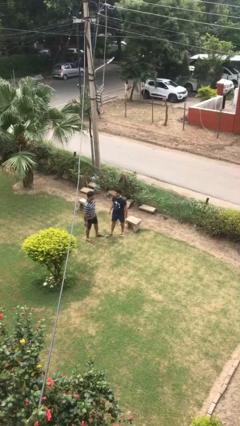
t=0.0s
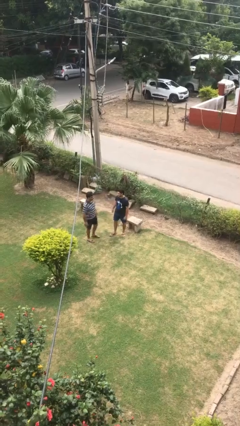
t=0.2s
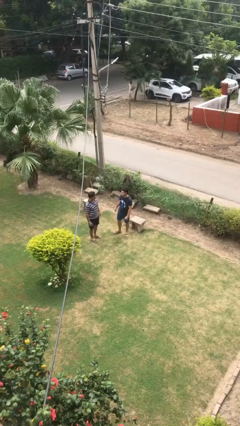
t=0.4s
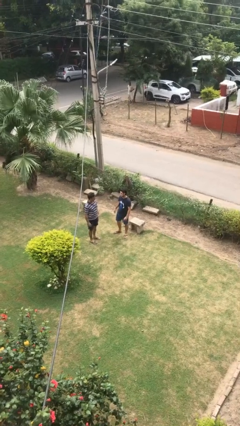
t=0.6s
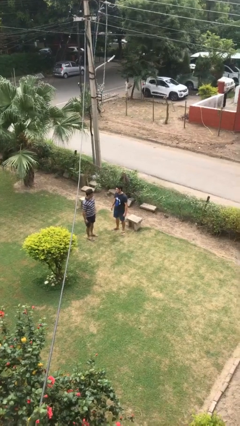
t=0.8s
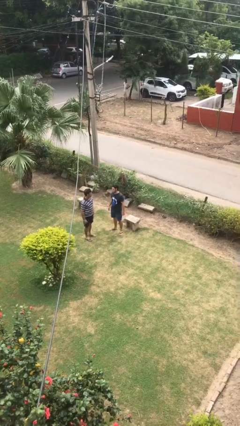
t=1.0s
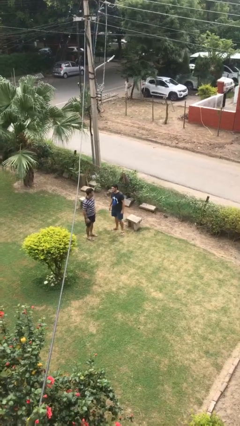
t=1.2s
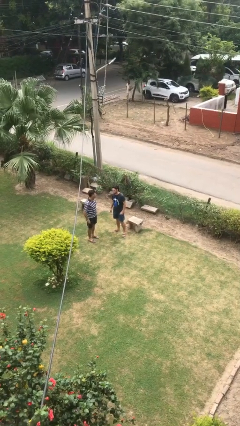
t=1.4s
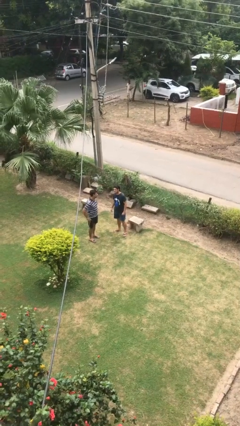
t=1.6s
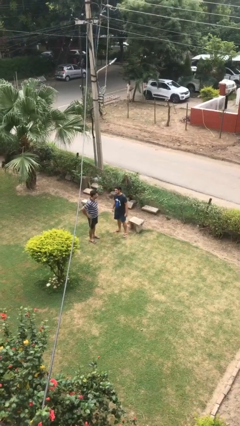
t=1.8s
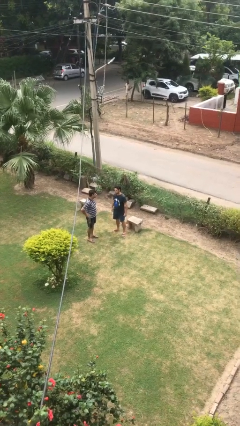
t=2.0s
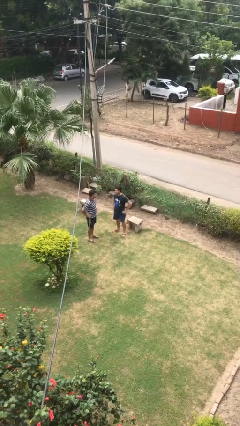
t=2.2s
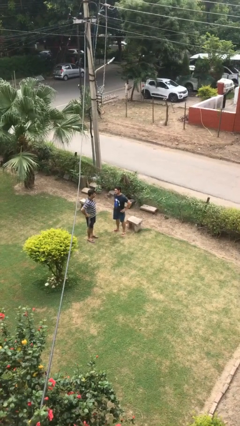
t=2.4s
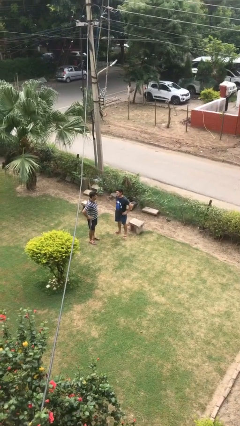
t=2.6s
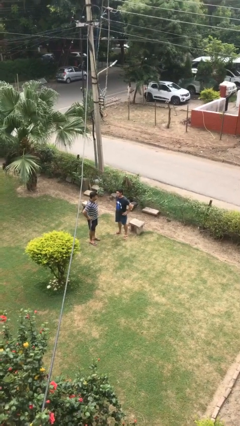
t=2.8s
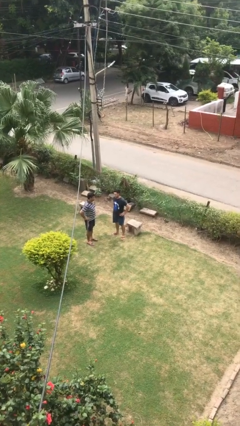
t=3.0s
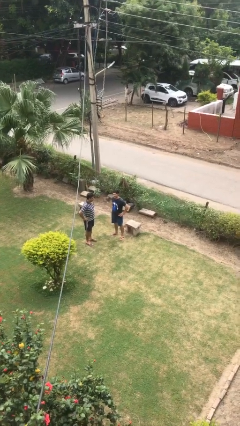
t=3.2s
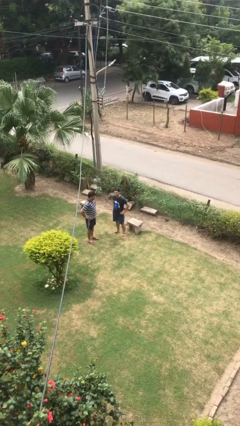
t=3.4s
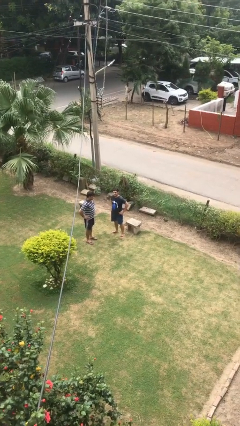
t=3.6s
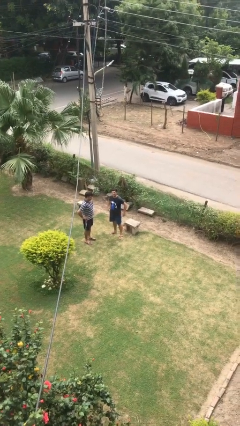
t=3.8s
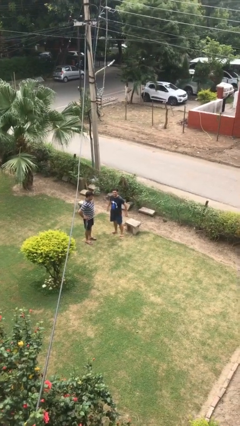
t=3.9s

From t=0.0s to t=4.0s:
person talks to person

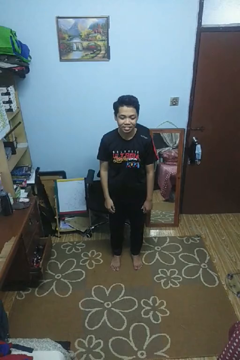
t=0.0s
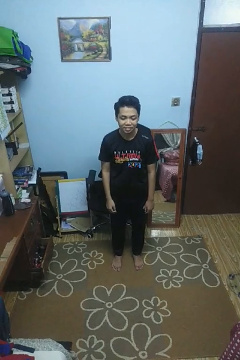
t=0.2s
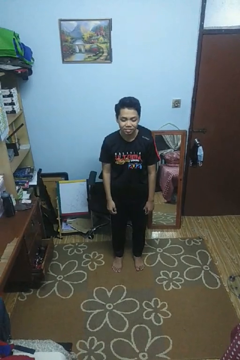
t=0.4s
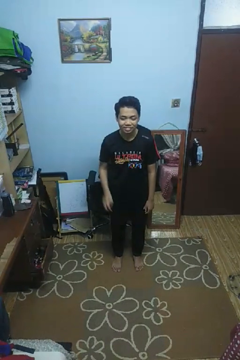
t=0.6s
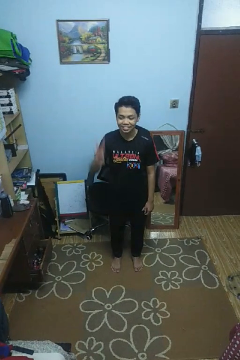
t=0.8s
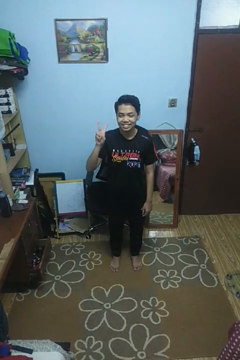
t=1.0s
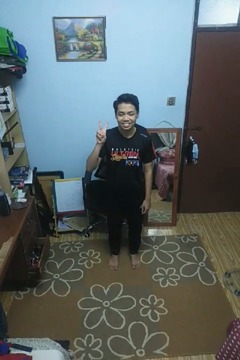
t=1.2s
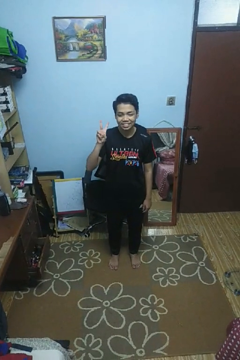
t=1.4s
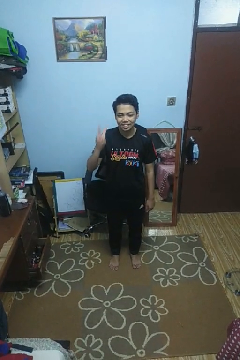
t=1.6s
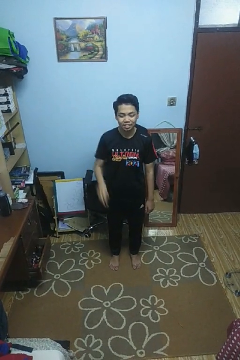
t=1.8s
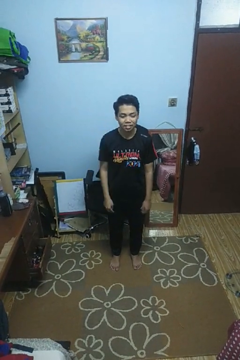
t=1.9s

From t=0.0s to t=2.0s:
person gestures peace

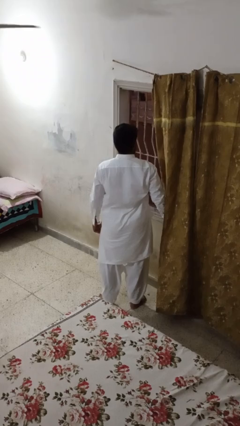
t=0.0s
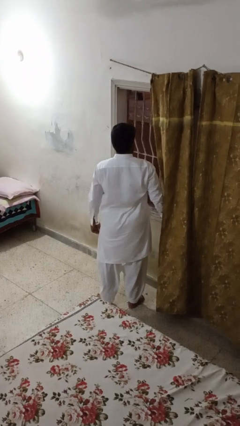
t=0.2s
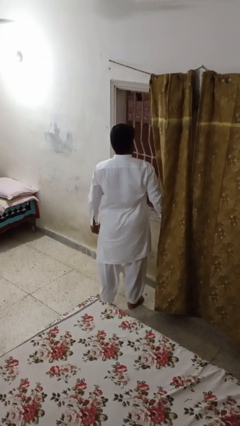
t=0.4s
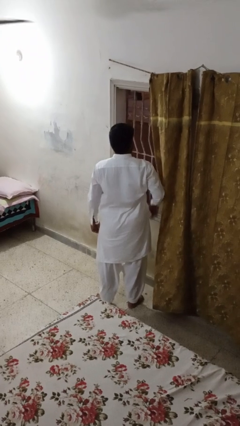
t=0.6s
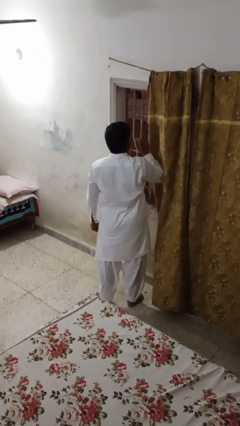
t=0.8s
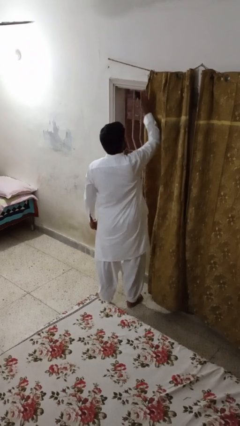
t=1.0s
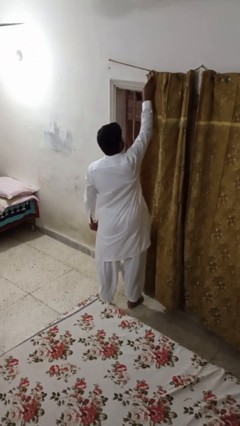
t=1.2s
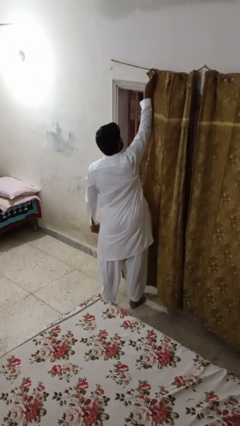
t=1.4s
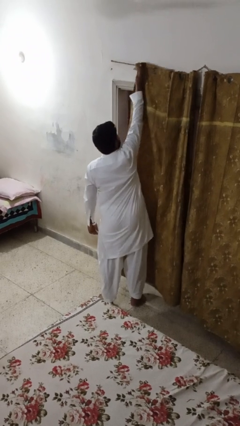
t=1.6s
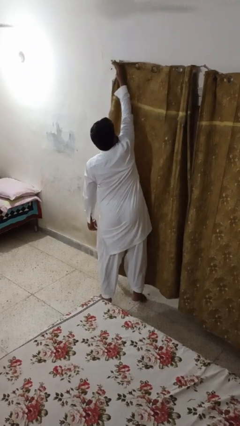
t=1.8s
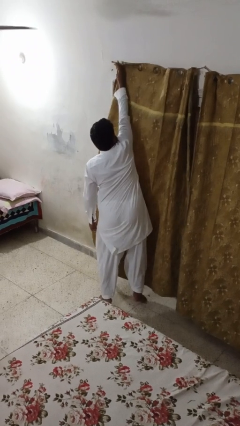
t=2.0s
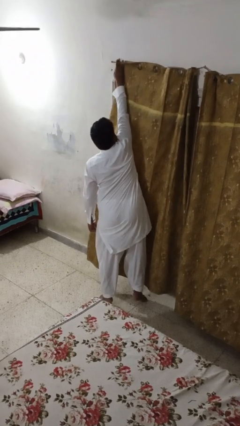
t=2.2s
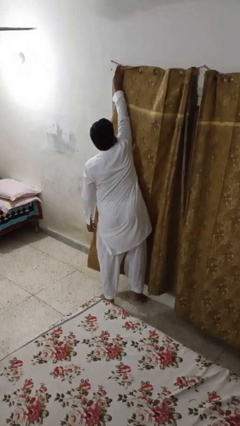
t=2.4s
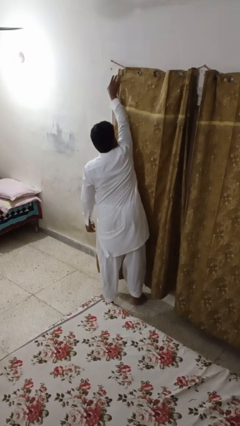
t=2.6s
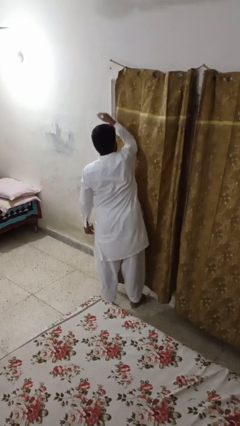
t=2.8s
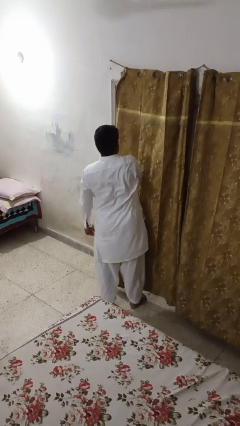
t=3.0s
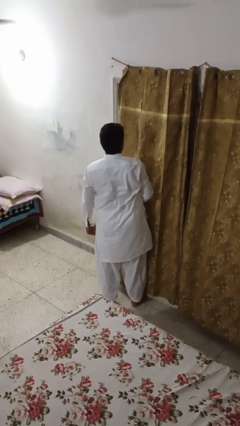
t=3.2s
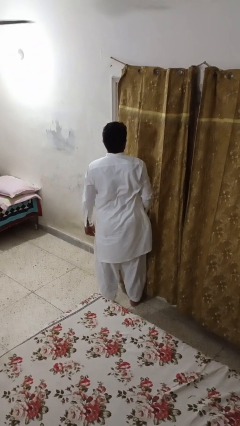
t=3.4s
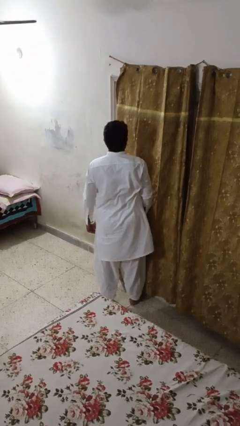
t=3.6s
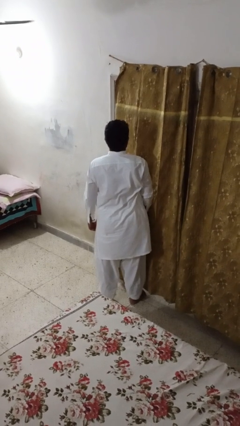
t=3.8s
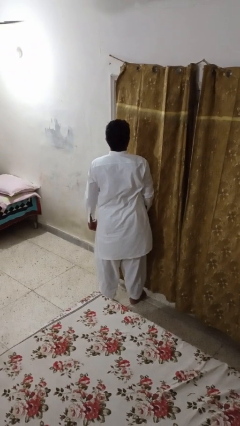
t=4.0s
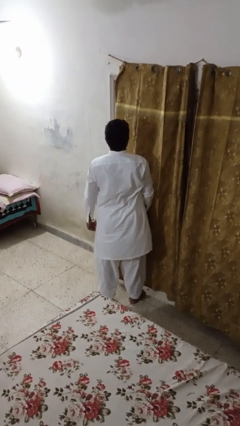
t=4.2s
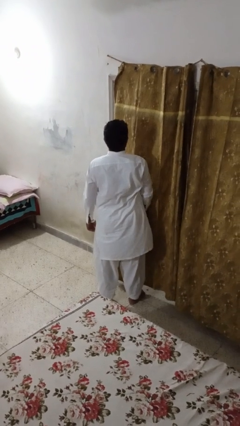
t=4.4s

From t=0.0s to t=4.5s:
person closes curtains

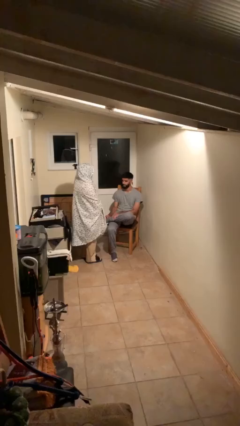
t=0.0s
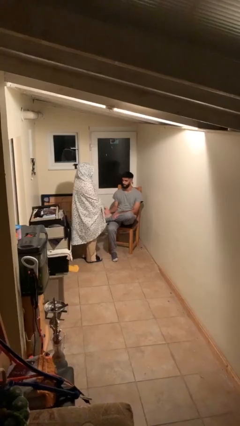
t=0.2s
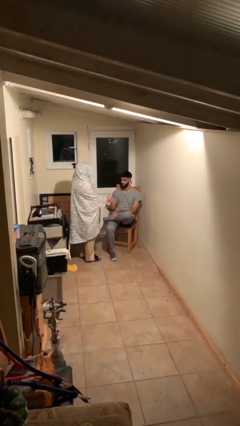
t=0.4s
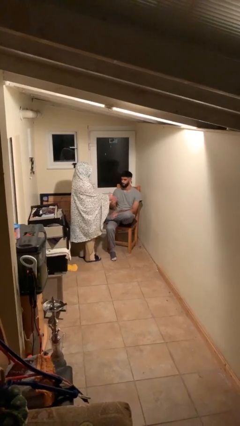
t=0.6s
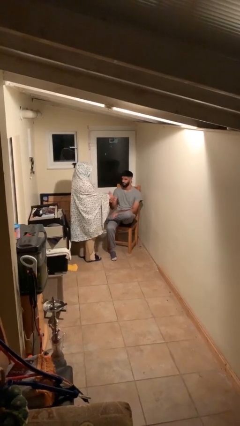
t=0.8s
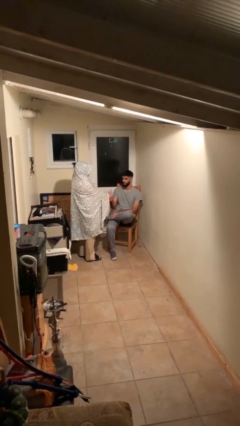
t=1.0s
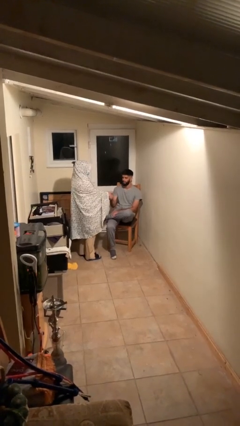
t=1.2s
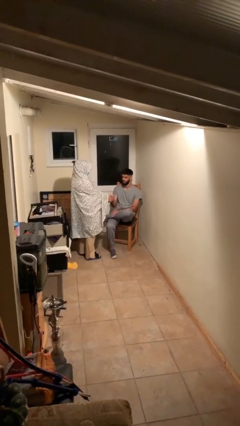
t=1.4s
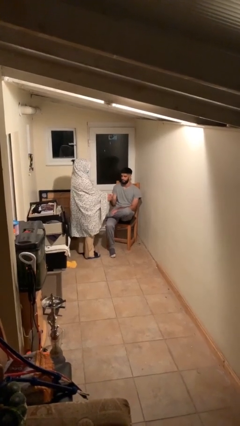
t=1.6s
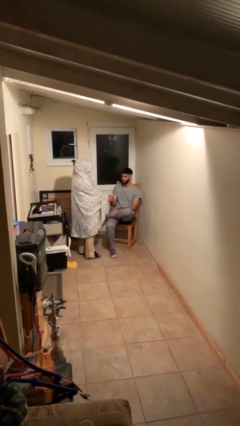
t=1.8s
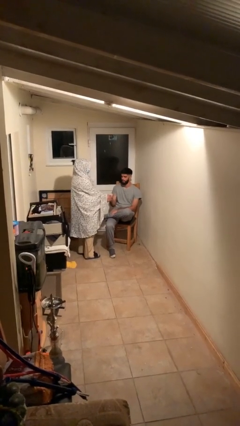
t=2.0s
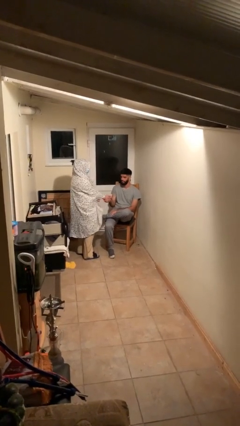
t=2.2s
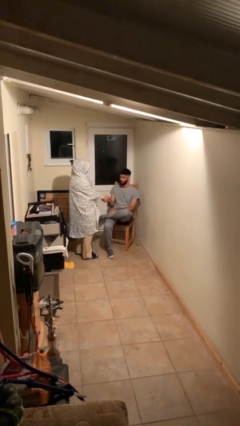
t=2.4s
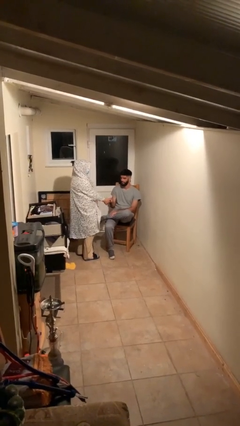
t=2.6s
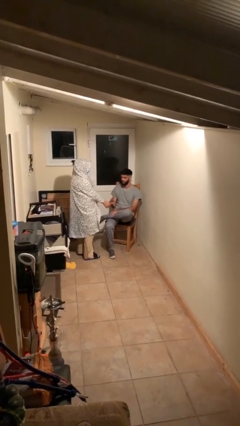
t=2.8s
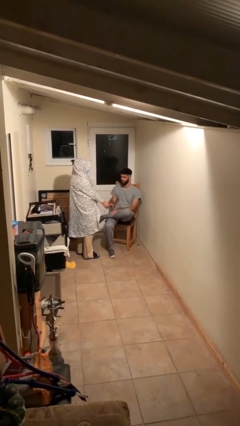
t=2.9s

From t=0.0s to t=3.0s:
person shakes hand

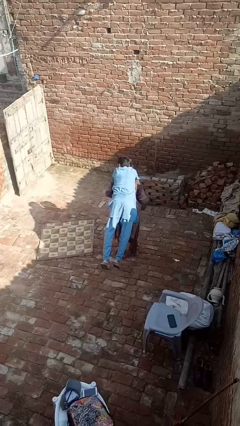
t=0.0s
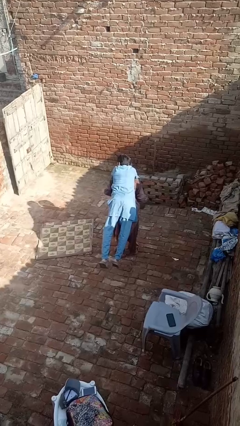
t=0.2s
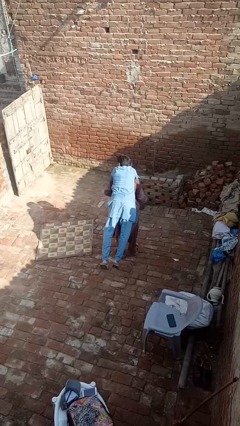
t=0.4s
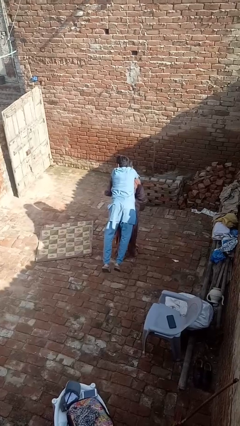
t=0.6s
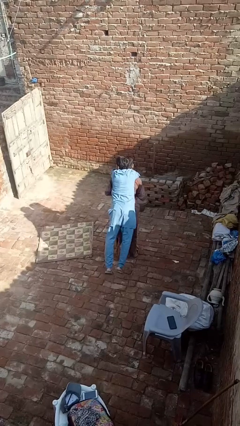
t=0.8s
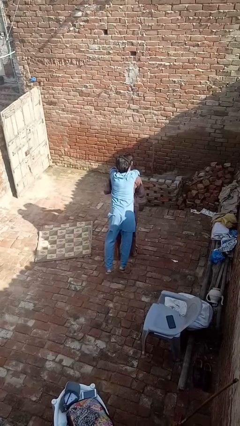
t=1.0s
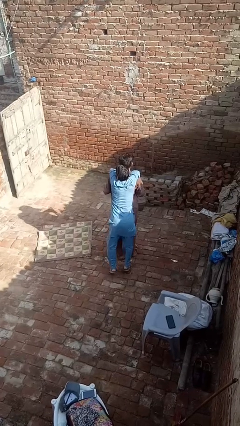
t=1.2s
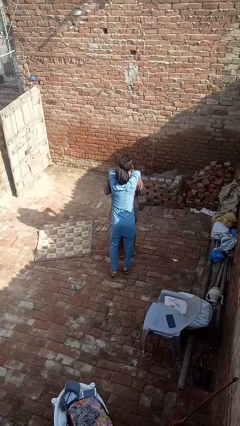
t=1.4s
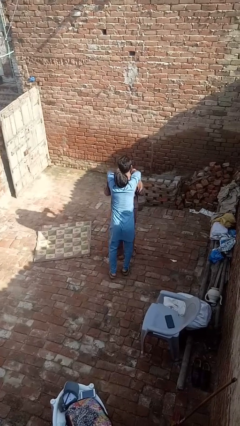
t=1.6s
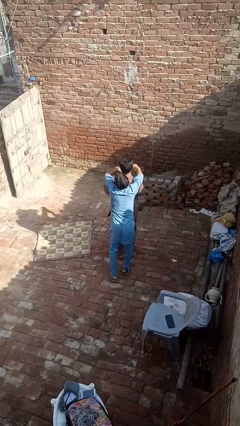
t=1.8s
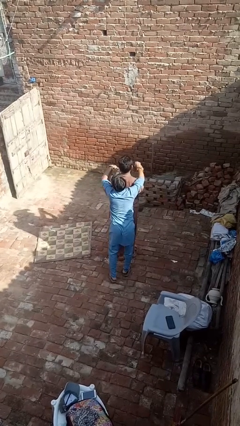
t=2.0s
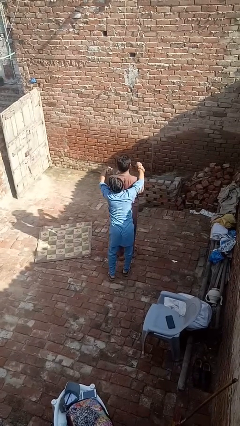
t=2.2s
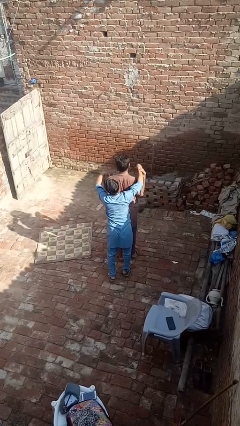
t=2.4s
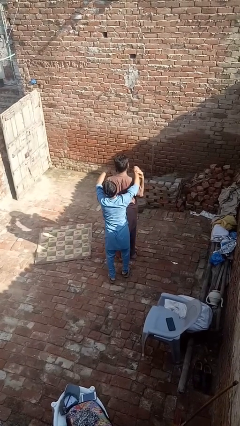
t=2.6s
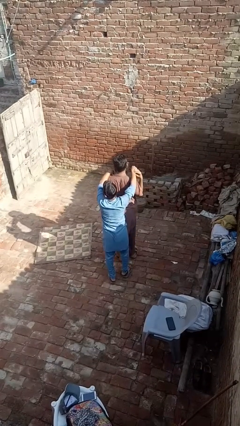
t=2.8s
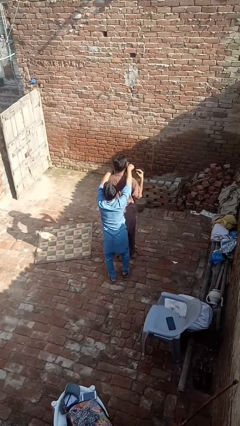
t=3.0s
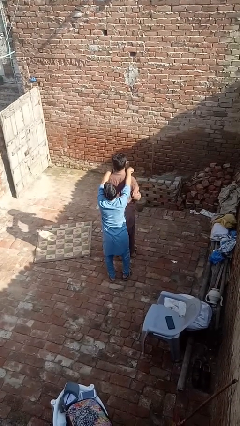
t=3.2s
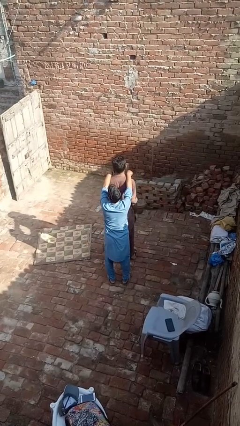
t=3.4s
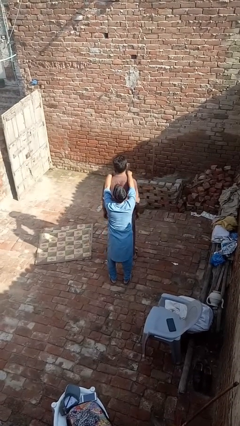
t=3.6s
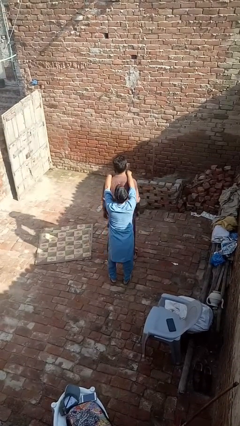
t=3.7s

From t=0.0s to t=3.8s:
person puts down person

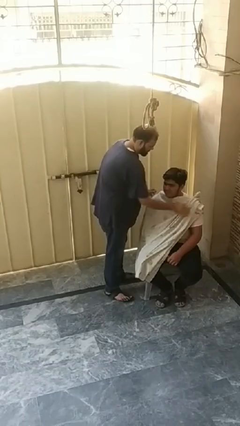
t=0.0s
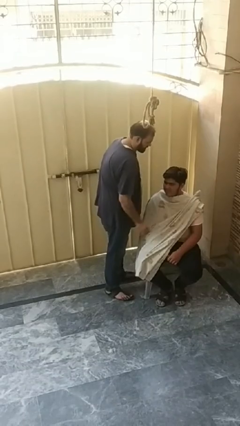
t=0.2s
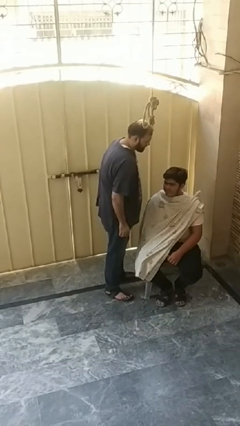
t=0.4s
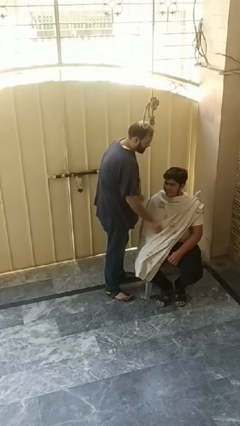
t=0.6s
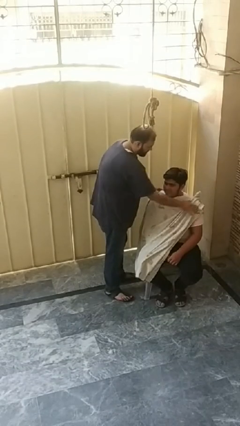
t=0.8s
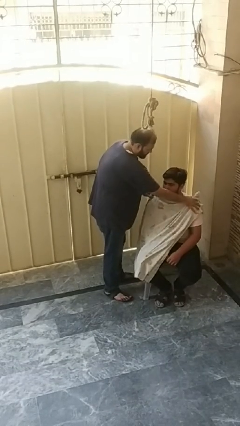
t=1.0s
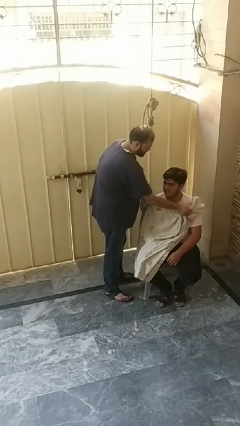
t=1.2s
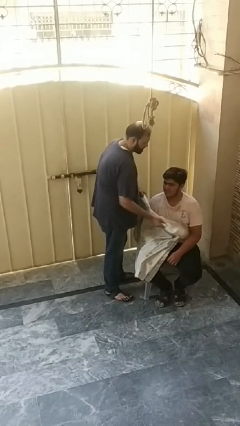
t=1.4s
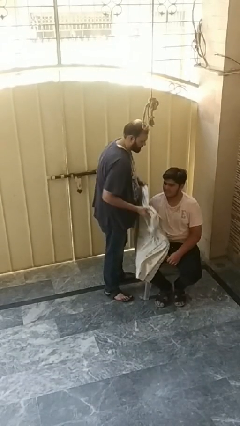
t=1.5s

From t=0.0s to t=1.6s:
person uncovers friend with blanket
